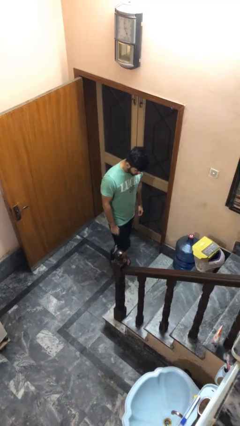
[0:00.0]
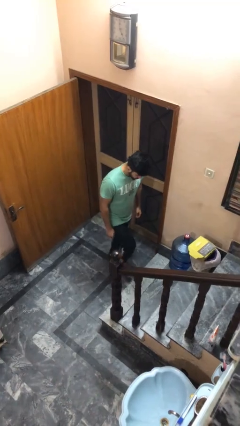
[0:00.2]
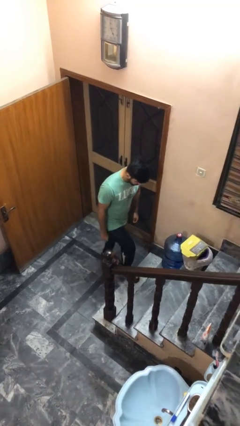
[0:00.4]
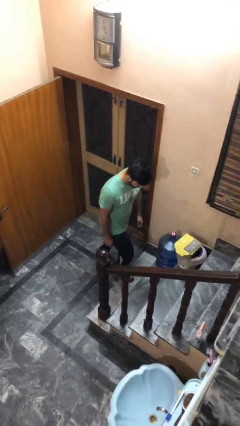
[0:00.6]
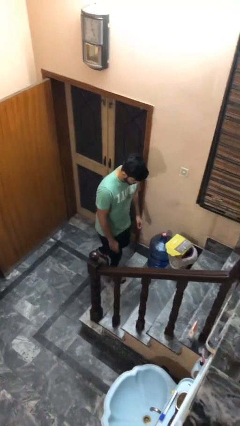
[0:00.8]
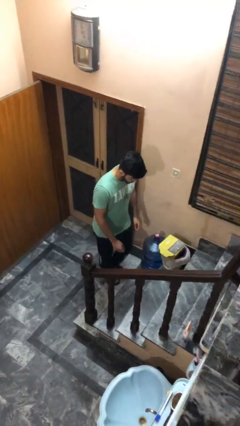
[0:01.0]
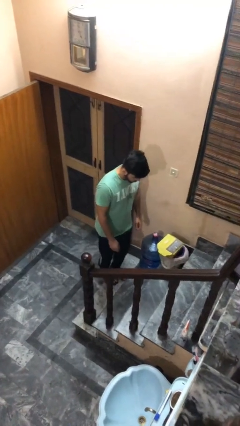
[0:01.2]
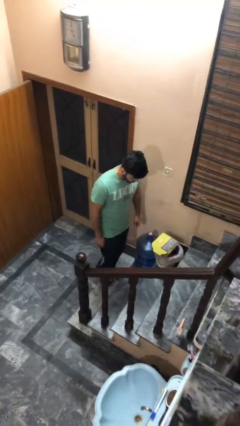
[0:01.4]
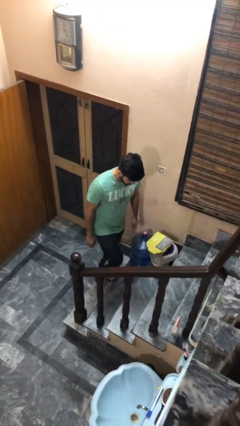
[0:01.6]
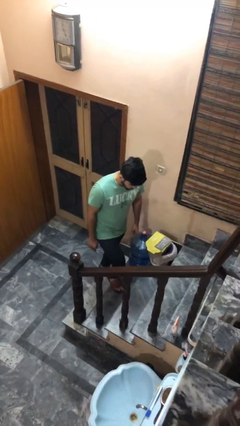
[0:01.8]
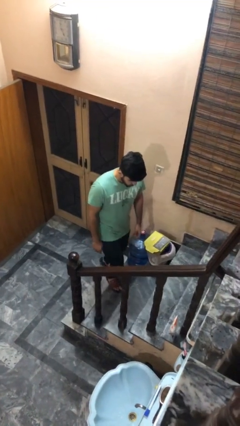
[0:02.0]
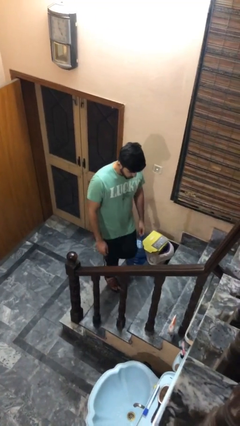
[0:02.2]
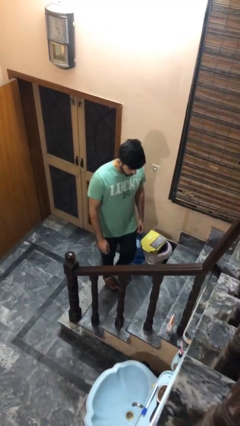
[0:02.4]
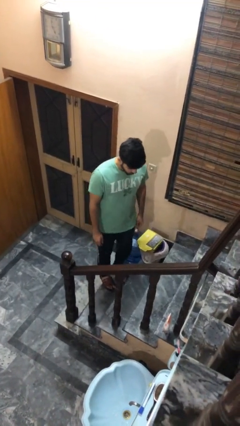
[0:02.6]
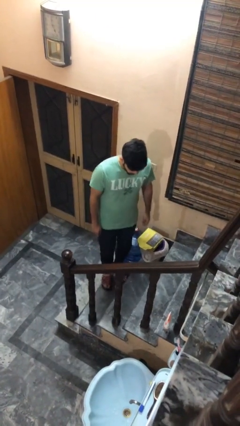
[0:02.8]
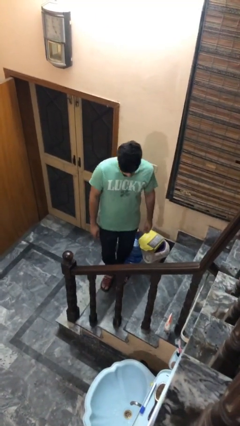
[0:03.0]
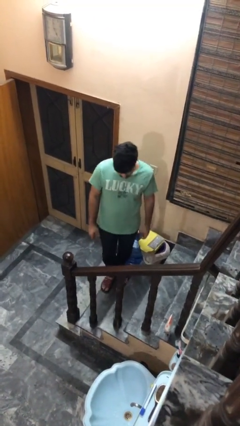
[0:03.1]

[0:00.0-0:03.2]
person climbs up stairs

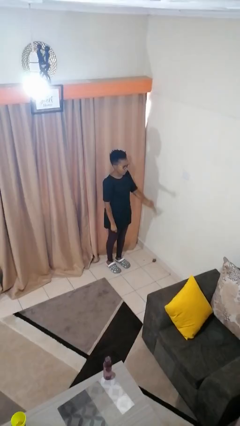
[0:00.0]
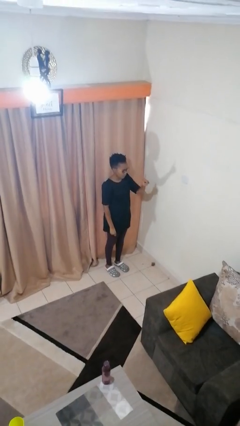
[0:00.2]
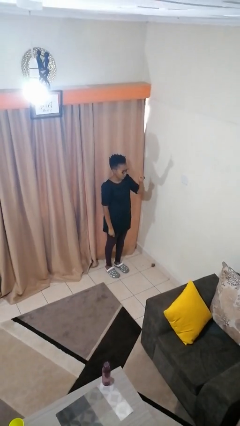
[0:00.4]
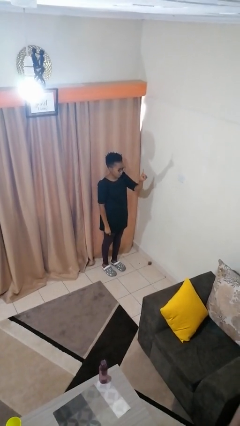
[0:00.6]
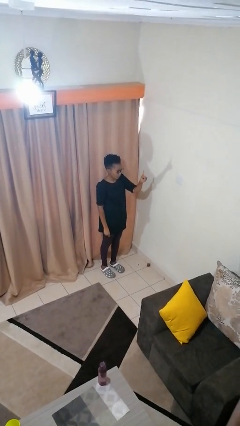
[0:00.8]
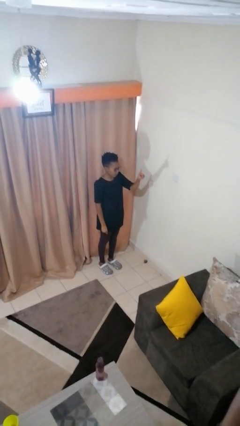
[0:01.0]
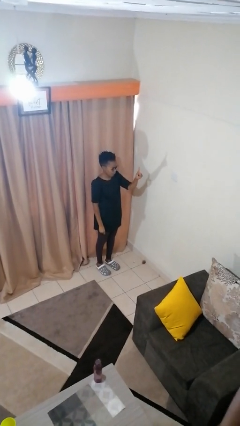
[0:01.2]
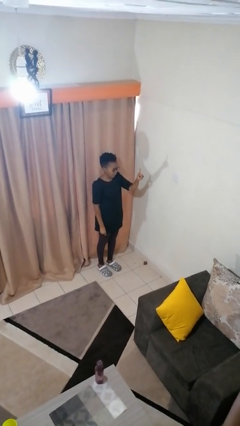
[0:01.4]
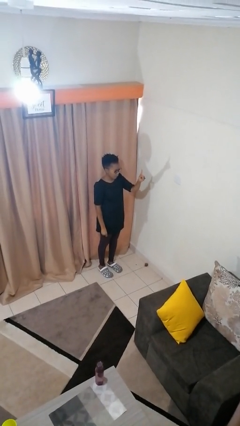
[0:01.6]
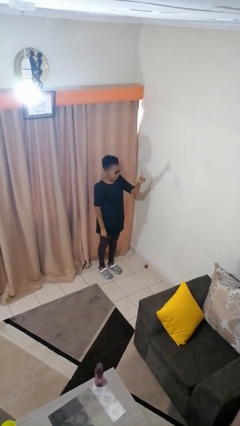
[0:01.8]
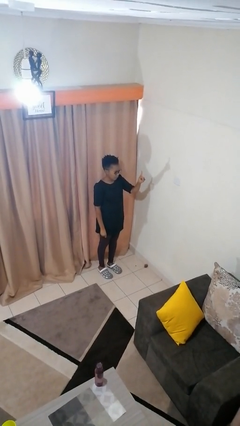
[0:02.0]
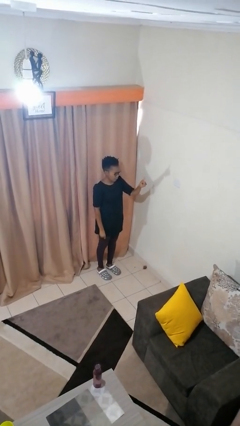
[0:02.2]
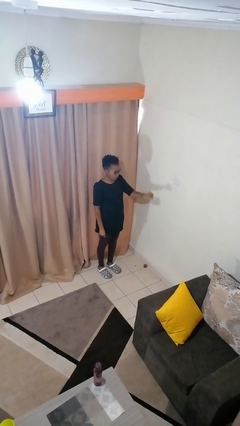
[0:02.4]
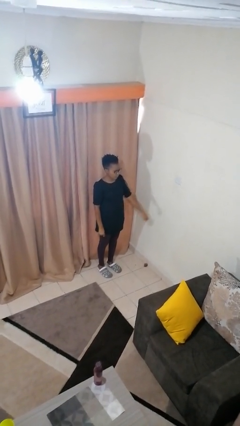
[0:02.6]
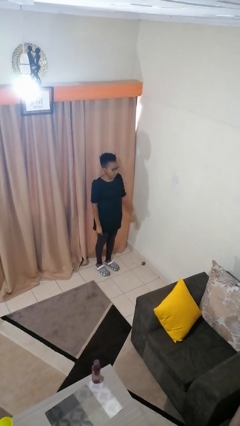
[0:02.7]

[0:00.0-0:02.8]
person gestures number one

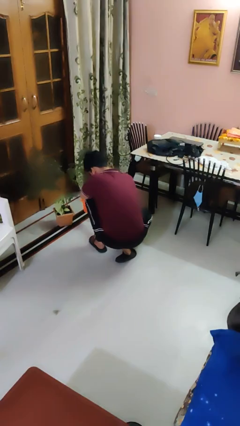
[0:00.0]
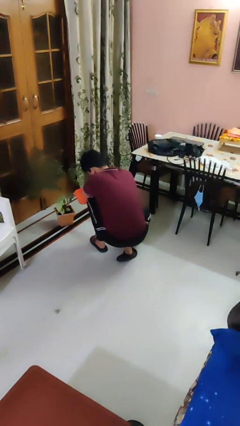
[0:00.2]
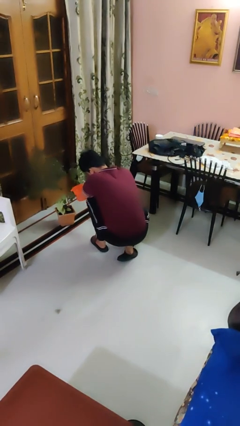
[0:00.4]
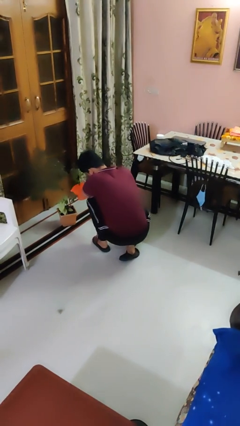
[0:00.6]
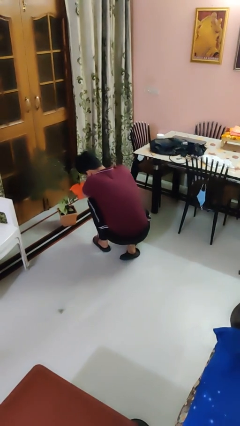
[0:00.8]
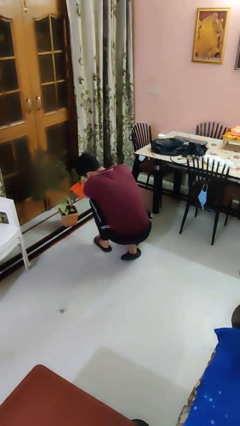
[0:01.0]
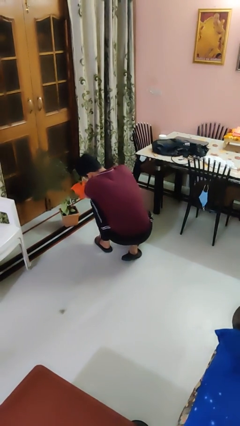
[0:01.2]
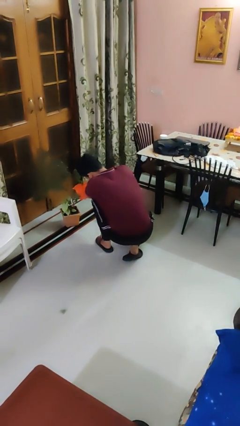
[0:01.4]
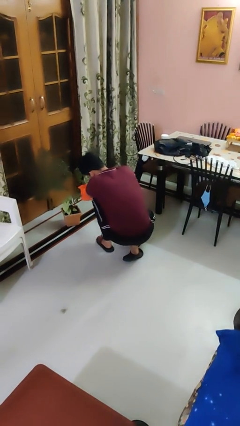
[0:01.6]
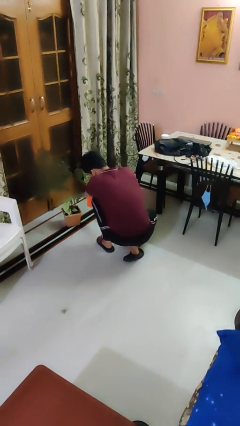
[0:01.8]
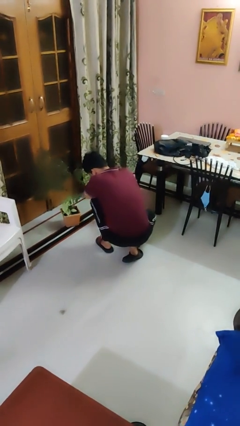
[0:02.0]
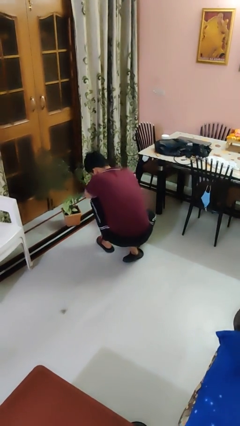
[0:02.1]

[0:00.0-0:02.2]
person waters houseplant

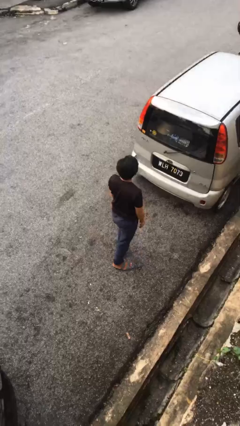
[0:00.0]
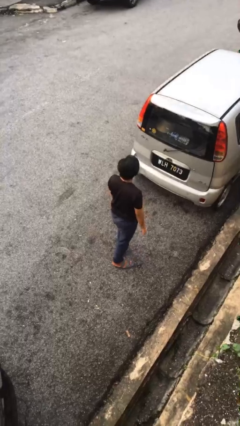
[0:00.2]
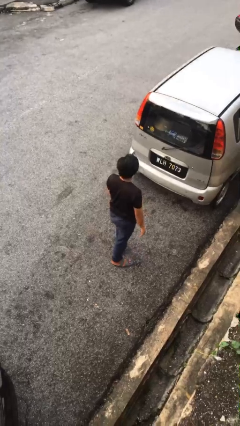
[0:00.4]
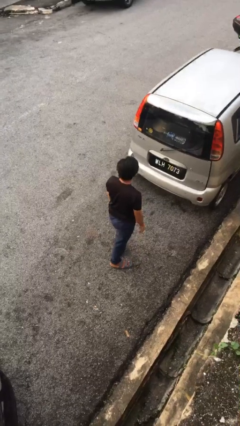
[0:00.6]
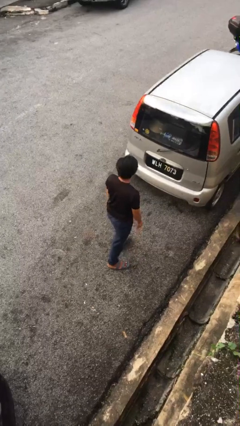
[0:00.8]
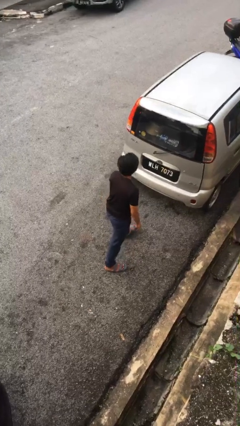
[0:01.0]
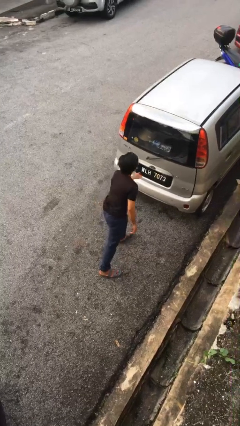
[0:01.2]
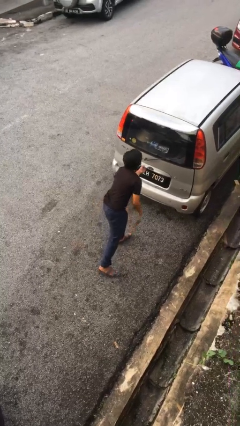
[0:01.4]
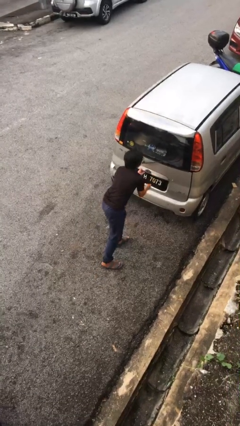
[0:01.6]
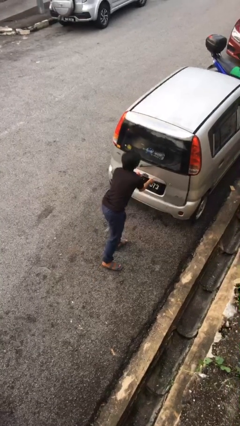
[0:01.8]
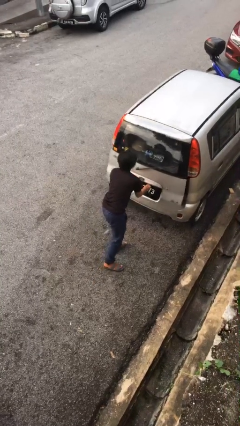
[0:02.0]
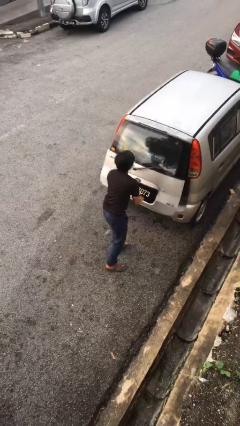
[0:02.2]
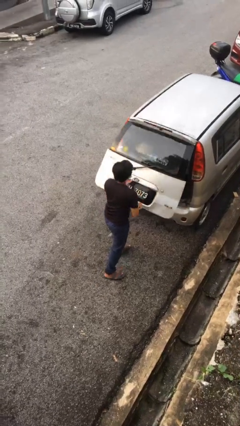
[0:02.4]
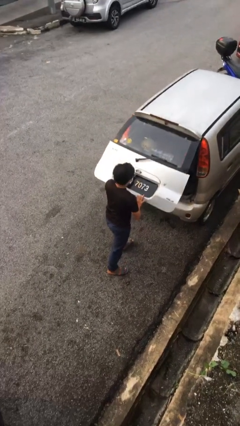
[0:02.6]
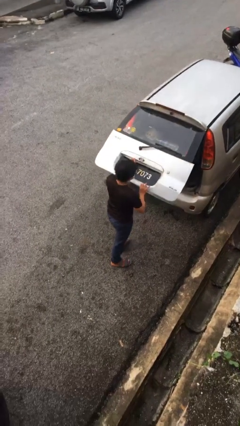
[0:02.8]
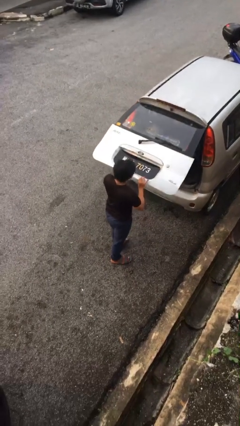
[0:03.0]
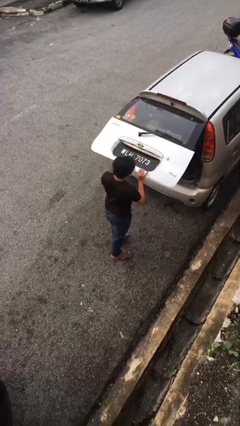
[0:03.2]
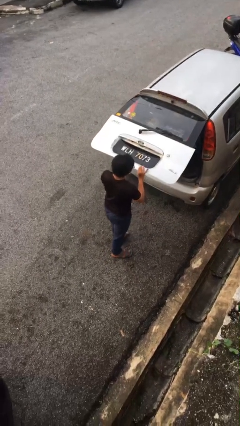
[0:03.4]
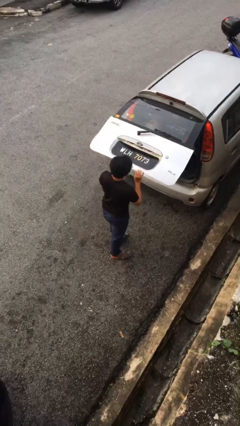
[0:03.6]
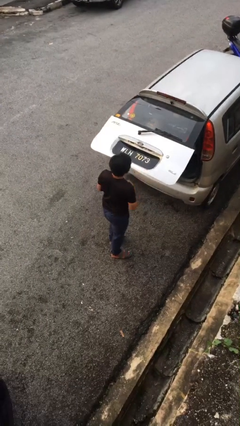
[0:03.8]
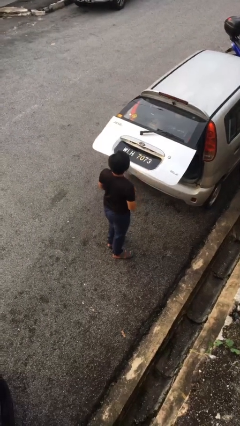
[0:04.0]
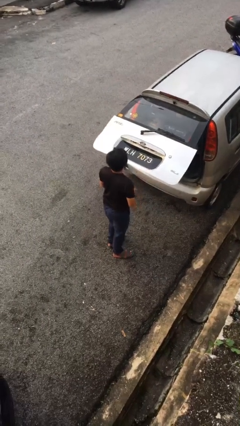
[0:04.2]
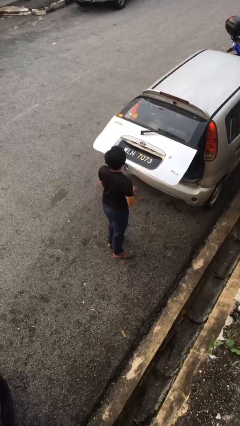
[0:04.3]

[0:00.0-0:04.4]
person opens car trunk

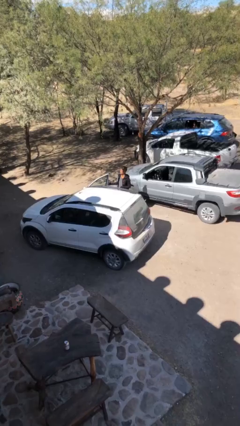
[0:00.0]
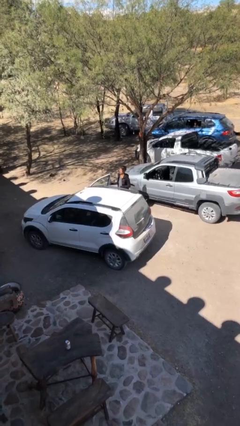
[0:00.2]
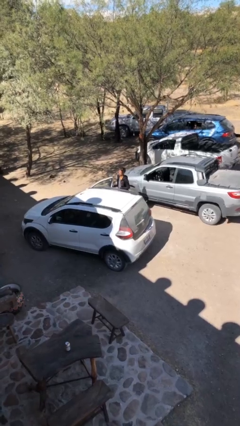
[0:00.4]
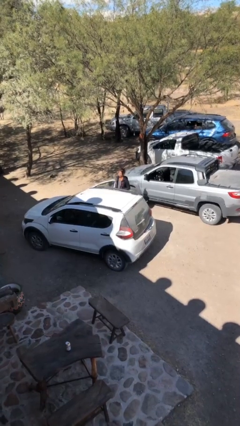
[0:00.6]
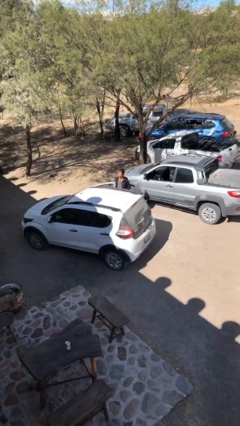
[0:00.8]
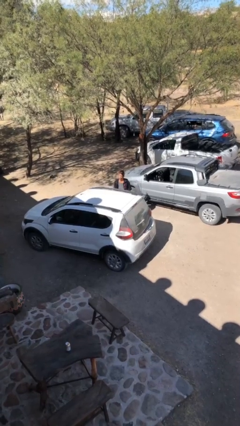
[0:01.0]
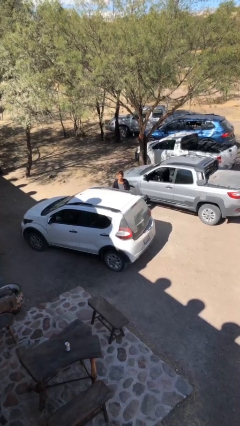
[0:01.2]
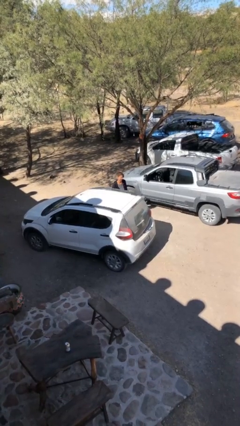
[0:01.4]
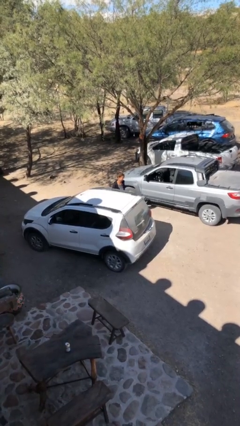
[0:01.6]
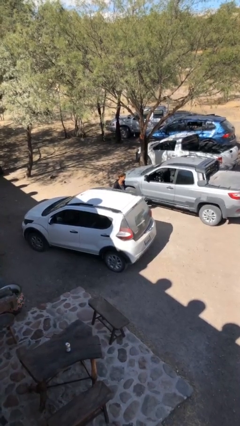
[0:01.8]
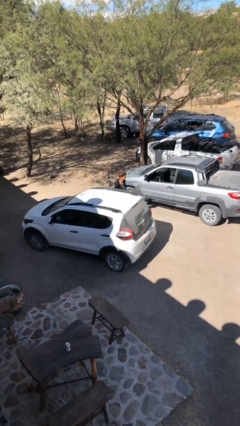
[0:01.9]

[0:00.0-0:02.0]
person closes car door

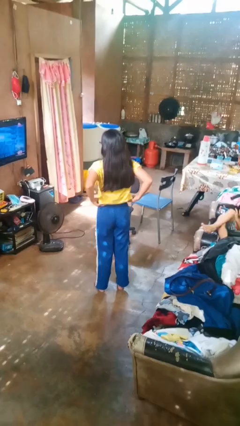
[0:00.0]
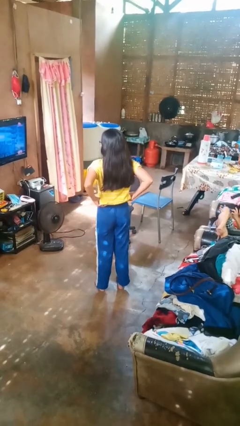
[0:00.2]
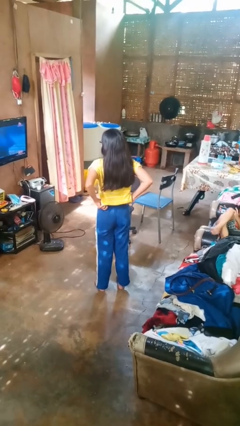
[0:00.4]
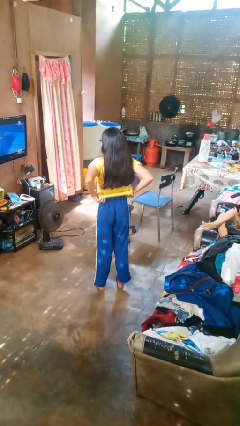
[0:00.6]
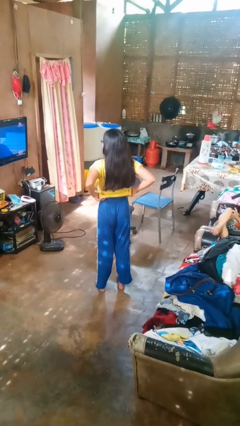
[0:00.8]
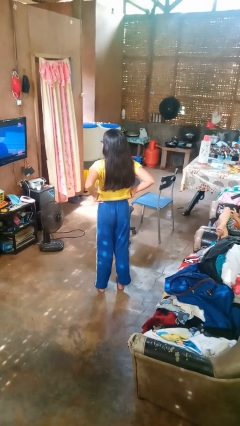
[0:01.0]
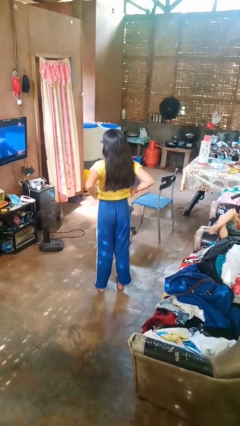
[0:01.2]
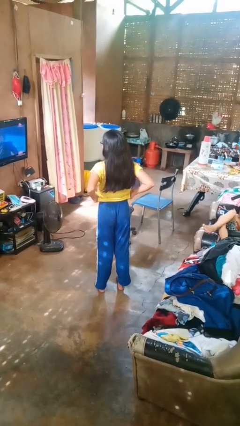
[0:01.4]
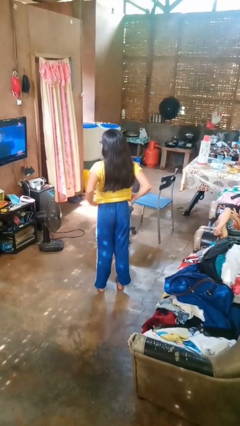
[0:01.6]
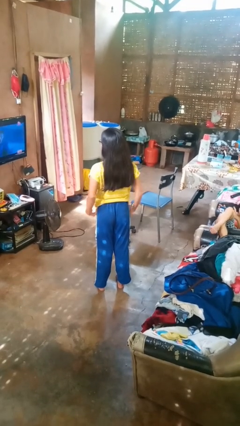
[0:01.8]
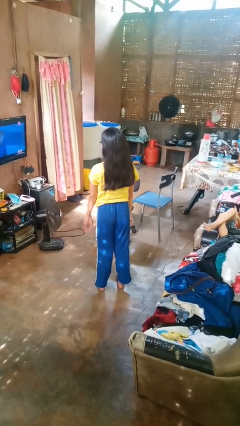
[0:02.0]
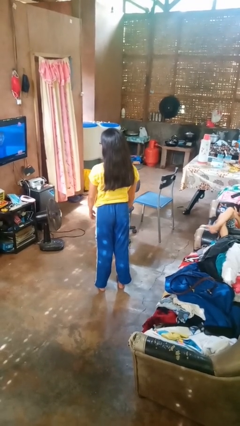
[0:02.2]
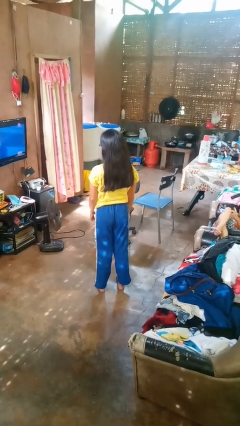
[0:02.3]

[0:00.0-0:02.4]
person hikes up pants

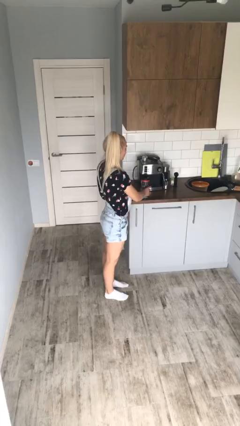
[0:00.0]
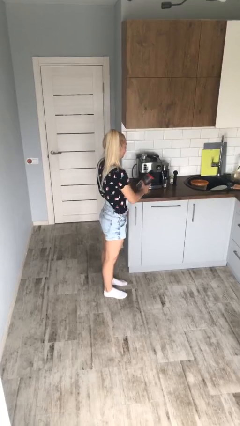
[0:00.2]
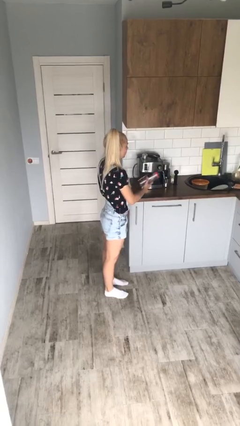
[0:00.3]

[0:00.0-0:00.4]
person picks up object from table
